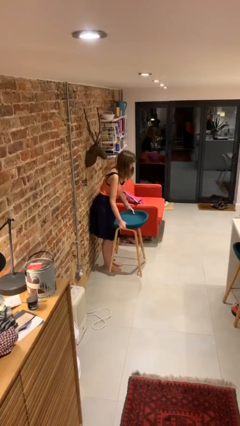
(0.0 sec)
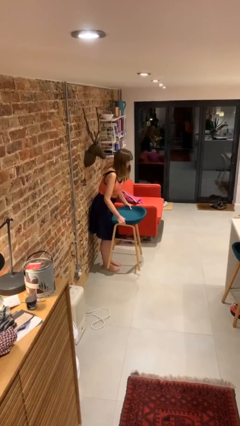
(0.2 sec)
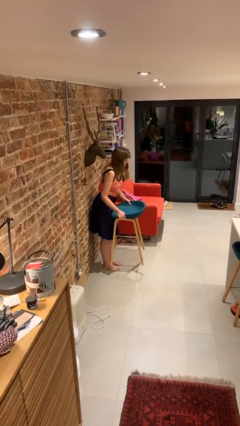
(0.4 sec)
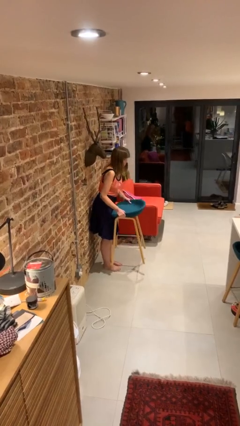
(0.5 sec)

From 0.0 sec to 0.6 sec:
person picks up object from floor

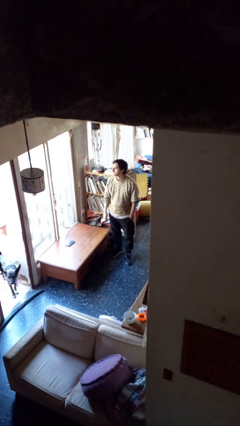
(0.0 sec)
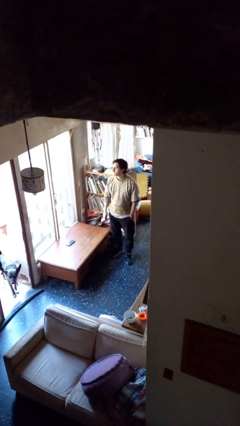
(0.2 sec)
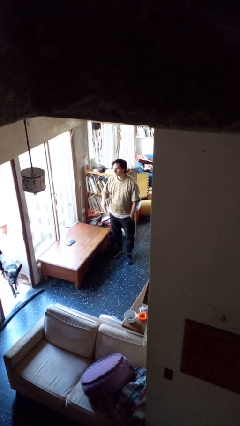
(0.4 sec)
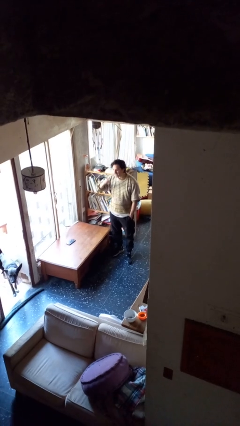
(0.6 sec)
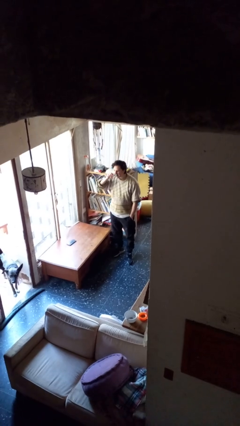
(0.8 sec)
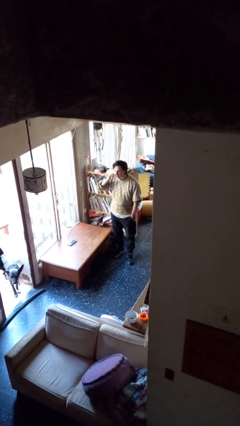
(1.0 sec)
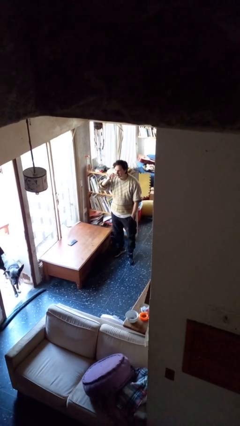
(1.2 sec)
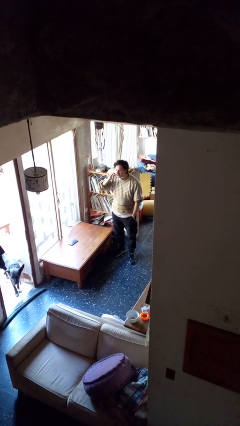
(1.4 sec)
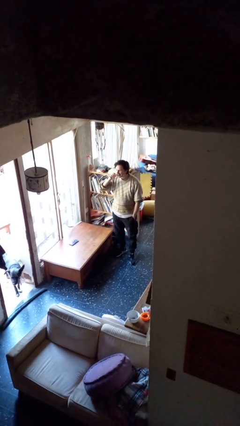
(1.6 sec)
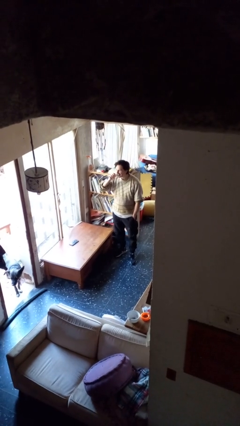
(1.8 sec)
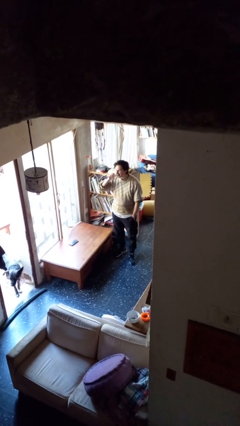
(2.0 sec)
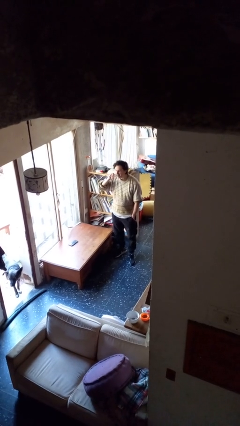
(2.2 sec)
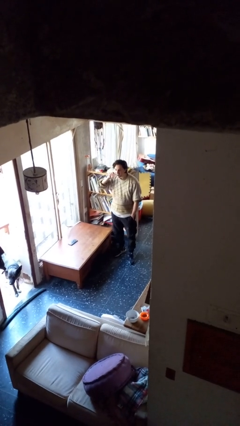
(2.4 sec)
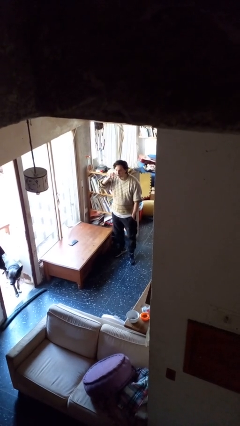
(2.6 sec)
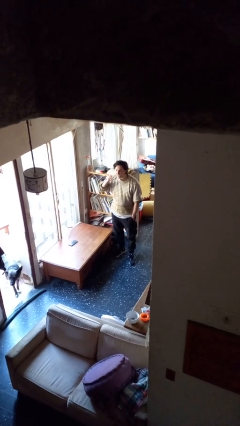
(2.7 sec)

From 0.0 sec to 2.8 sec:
person brushes teeth

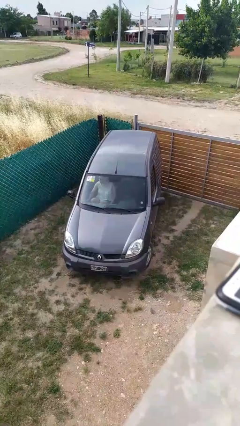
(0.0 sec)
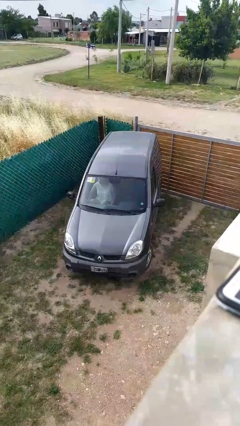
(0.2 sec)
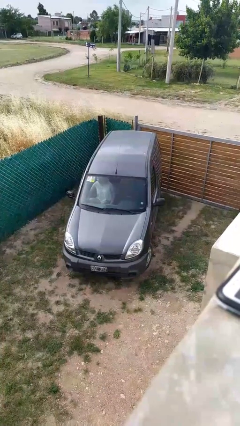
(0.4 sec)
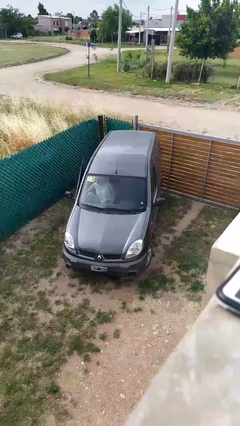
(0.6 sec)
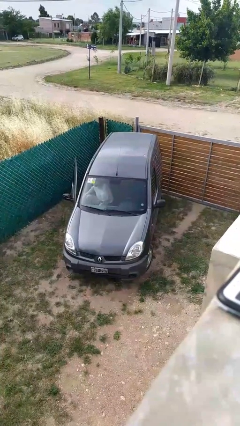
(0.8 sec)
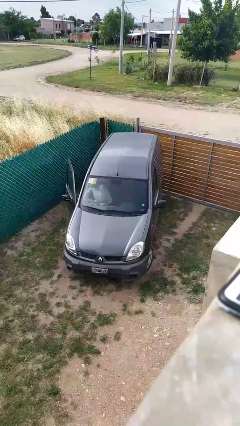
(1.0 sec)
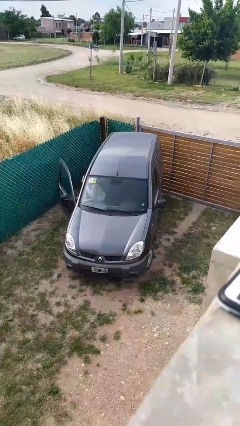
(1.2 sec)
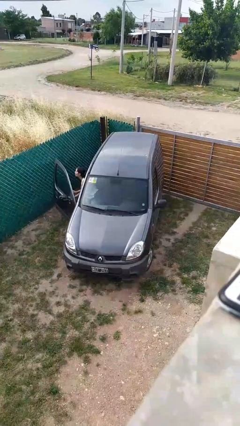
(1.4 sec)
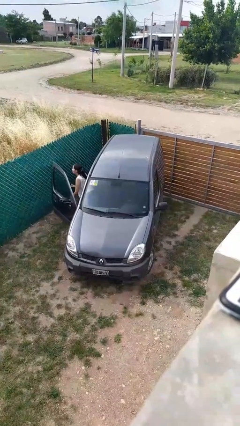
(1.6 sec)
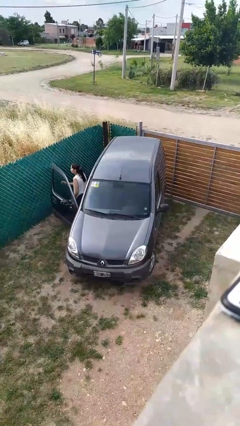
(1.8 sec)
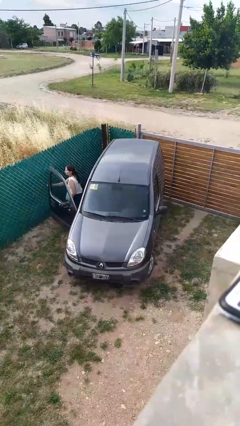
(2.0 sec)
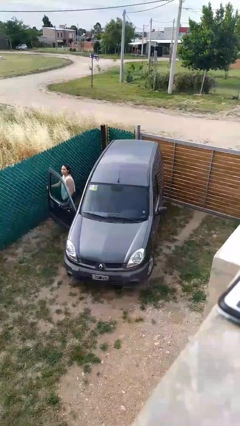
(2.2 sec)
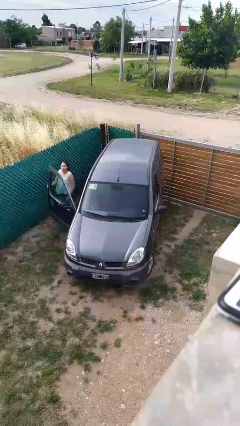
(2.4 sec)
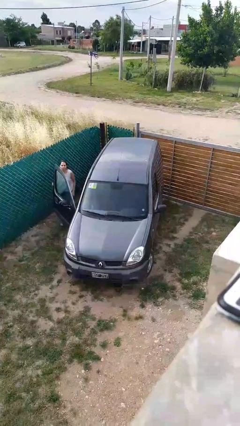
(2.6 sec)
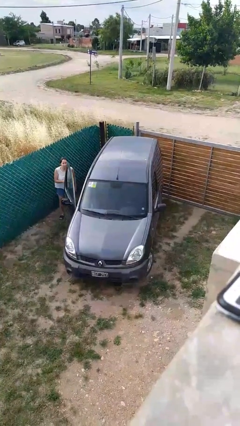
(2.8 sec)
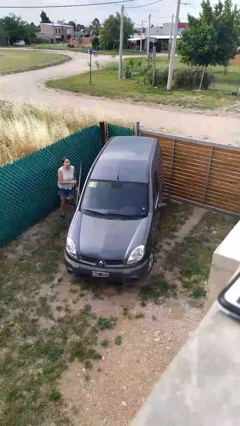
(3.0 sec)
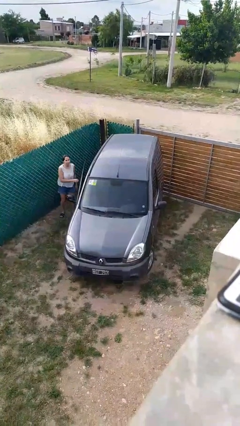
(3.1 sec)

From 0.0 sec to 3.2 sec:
car drops off person

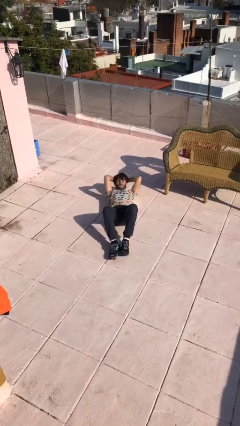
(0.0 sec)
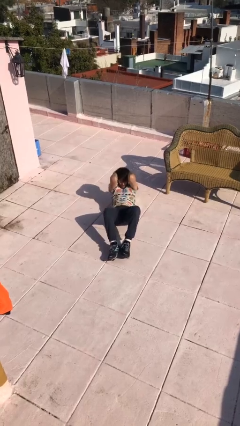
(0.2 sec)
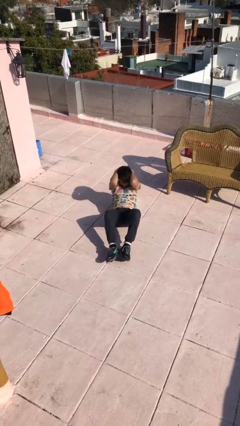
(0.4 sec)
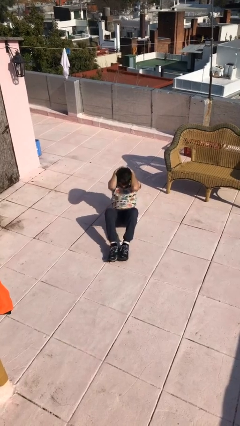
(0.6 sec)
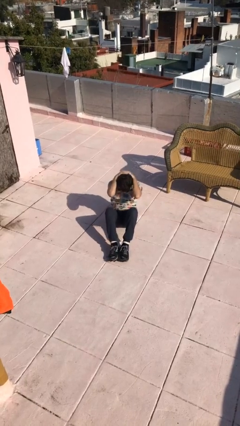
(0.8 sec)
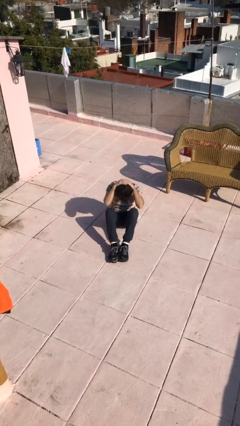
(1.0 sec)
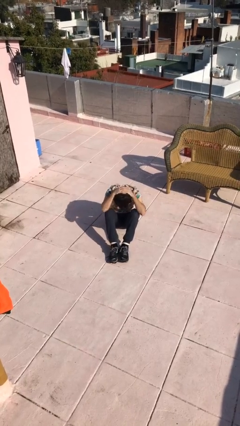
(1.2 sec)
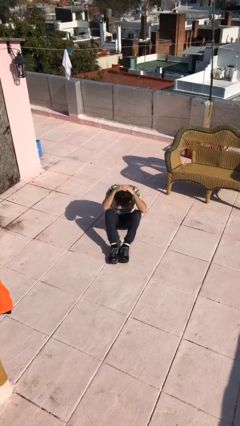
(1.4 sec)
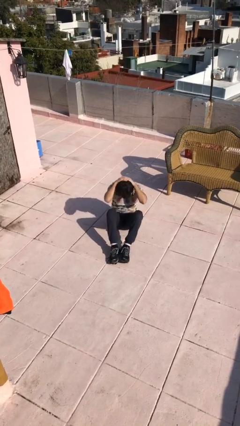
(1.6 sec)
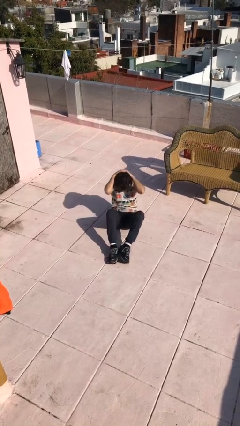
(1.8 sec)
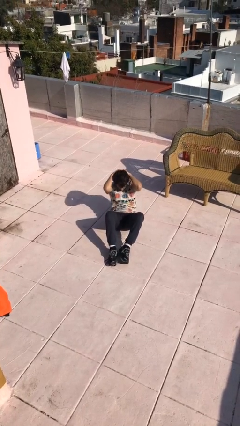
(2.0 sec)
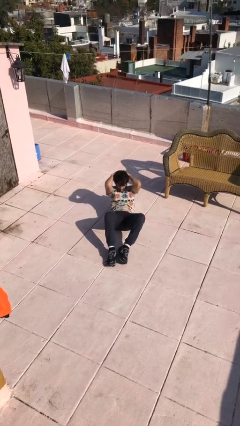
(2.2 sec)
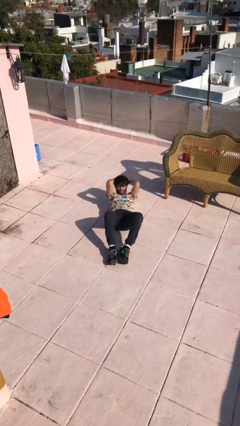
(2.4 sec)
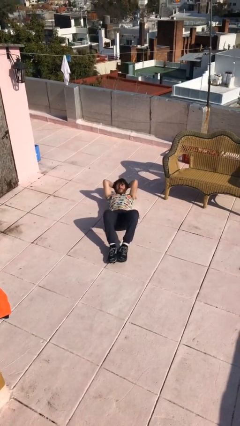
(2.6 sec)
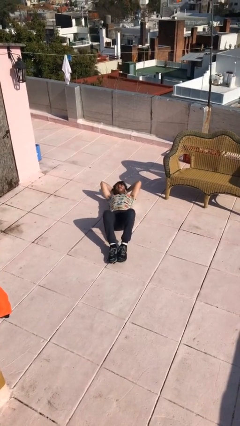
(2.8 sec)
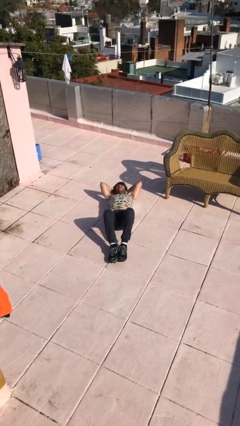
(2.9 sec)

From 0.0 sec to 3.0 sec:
person exercises with situp

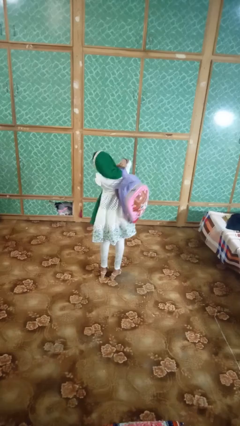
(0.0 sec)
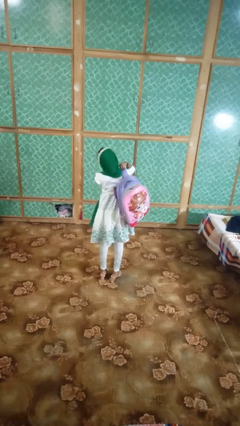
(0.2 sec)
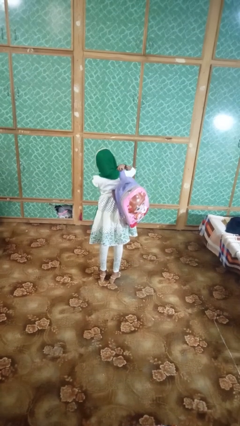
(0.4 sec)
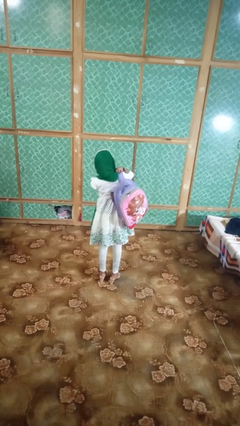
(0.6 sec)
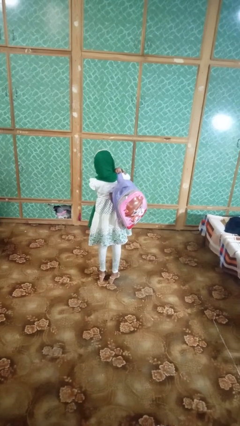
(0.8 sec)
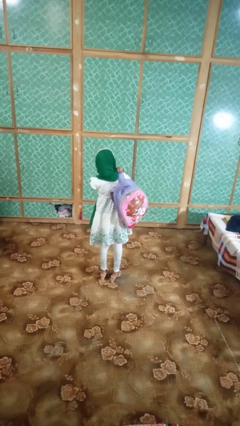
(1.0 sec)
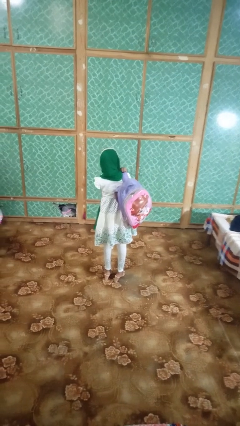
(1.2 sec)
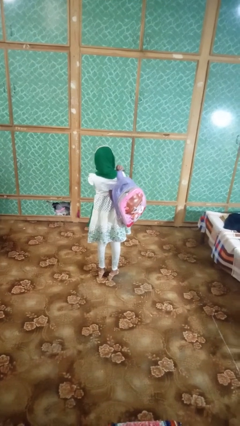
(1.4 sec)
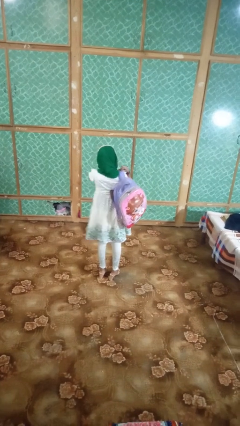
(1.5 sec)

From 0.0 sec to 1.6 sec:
person puts on backpack

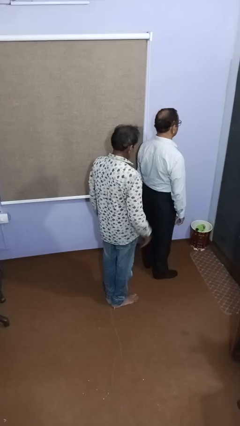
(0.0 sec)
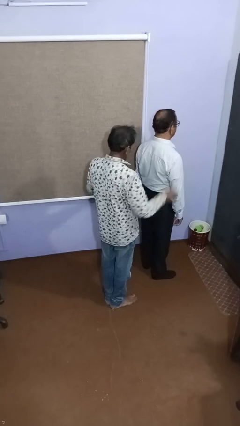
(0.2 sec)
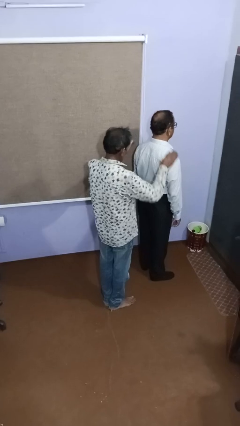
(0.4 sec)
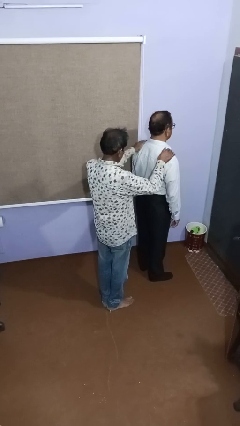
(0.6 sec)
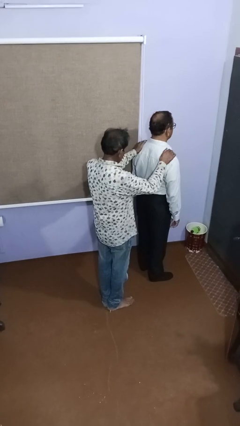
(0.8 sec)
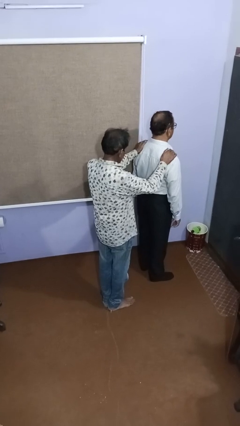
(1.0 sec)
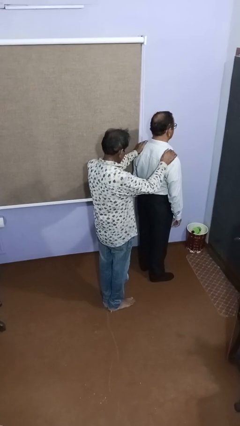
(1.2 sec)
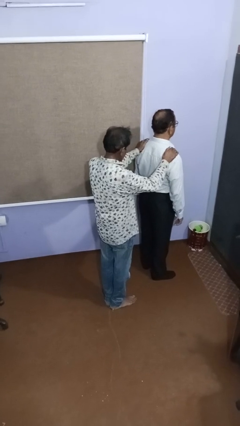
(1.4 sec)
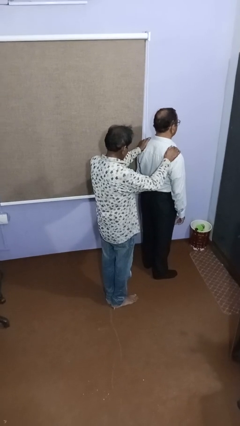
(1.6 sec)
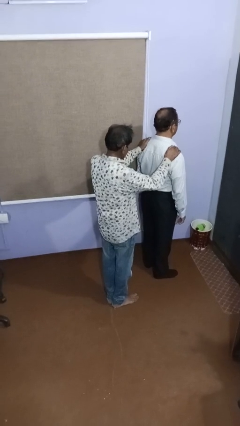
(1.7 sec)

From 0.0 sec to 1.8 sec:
person grabs person by shoulder

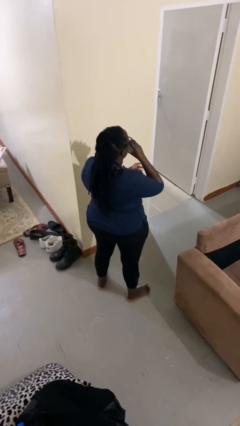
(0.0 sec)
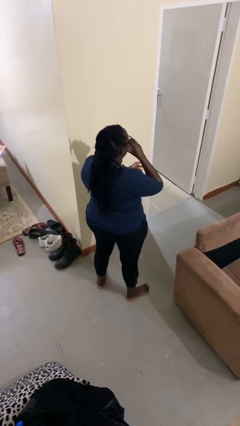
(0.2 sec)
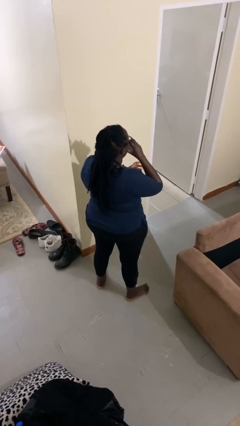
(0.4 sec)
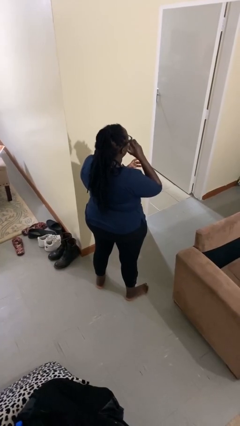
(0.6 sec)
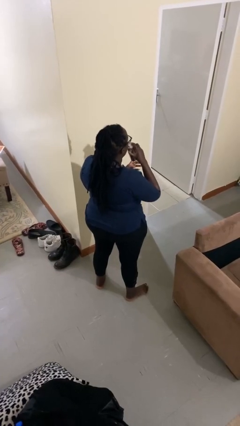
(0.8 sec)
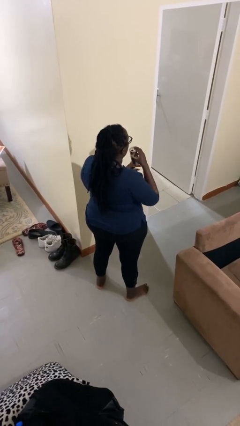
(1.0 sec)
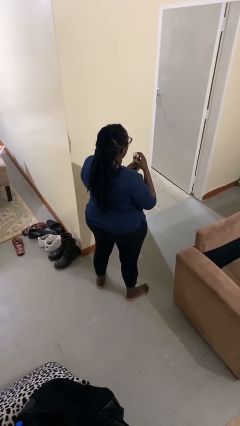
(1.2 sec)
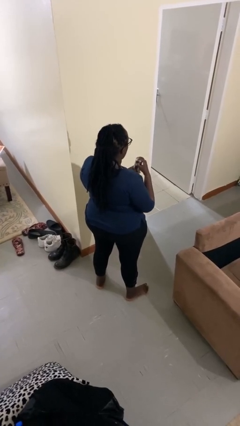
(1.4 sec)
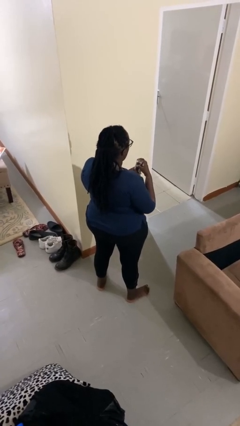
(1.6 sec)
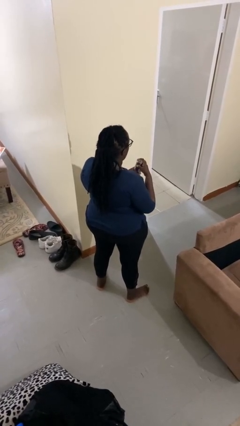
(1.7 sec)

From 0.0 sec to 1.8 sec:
person drinks from beverage can

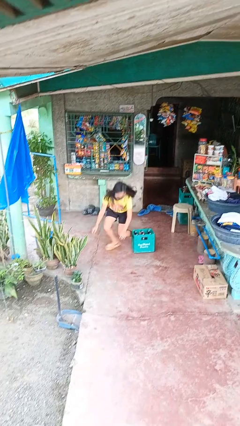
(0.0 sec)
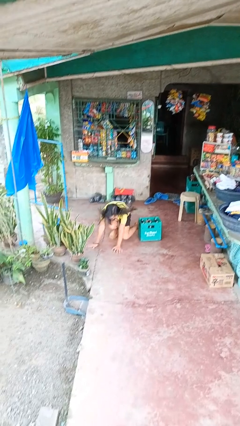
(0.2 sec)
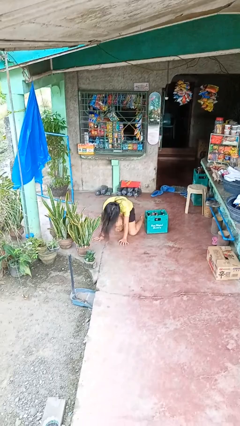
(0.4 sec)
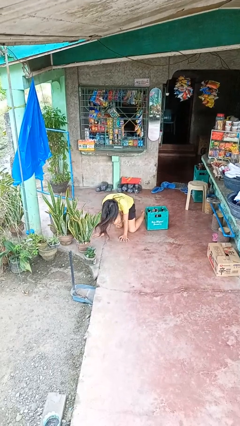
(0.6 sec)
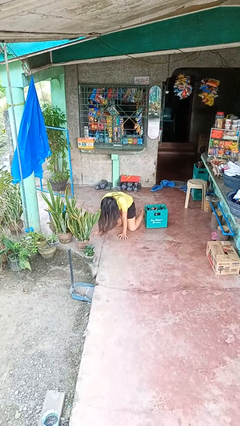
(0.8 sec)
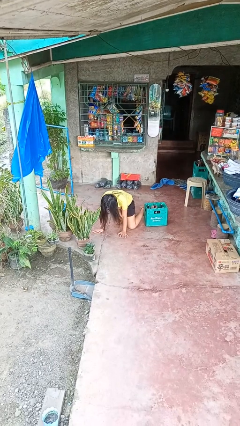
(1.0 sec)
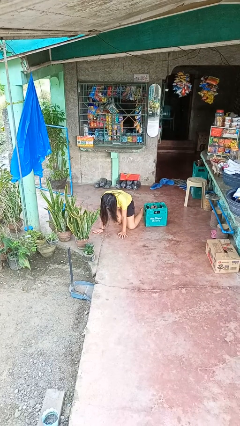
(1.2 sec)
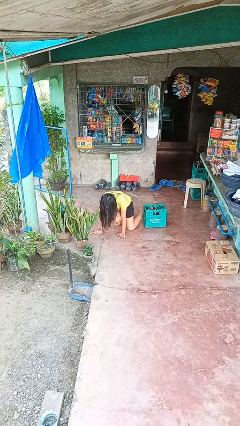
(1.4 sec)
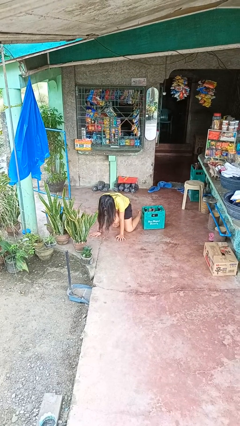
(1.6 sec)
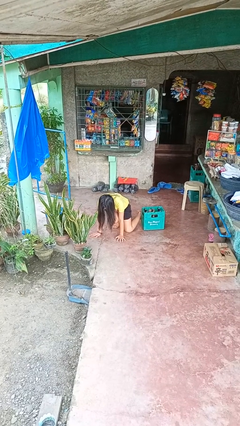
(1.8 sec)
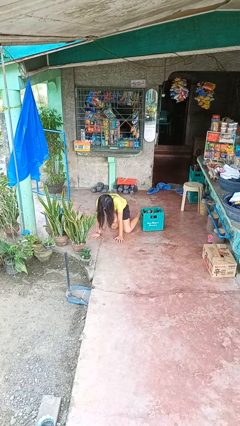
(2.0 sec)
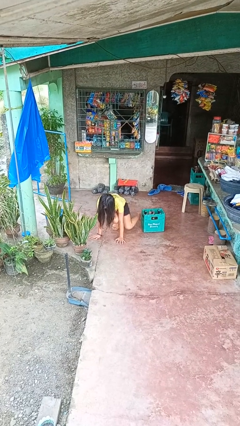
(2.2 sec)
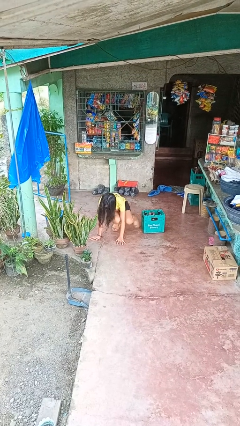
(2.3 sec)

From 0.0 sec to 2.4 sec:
person lies down on floor
